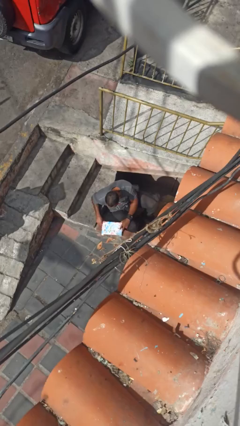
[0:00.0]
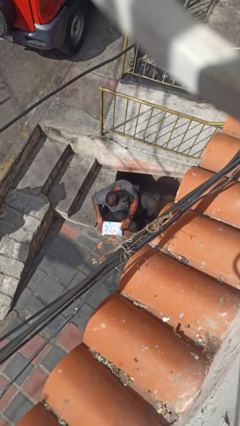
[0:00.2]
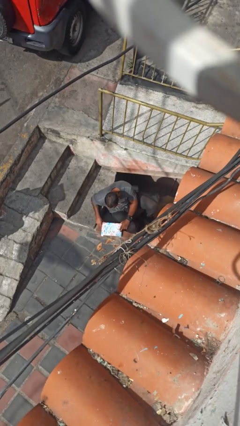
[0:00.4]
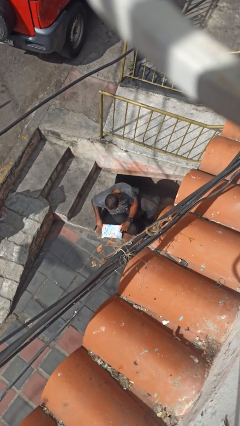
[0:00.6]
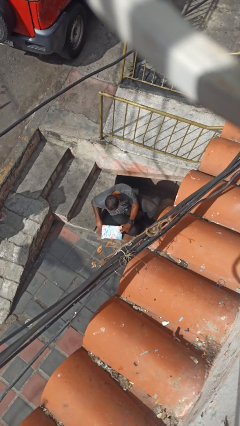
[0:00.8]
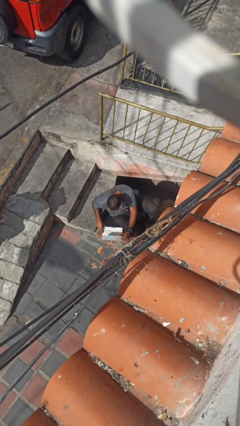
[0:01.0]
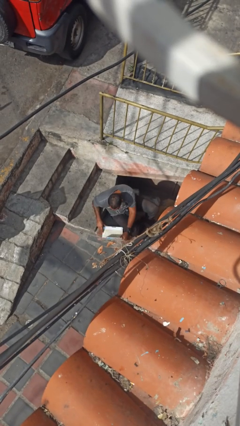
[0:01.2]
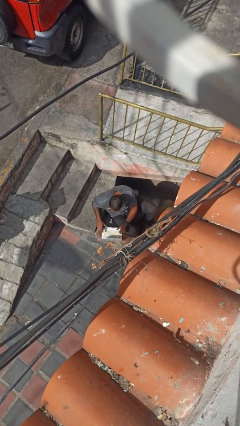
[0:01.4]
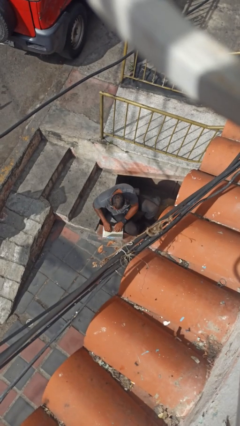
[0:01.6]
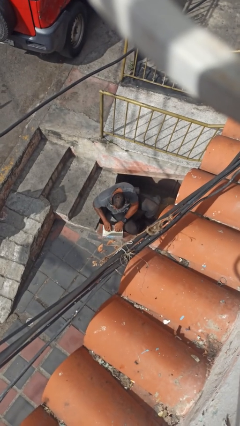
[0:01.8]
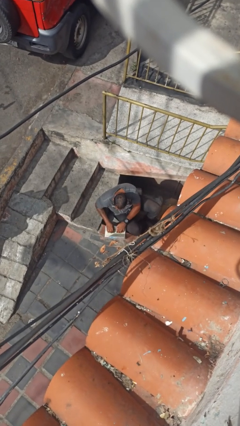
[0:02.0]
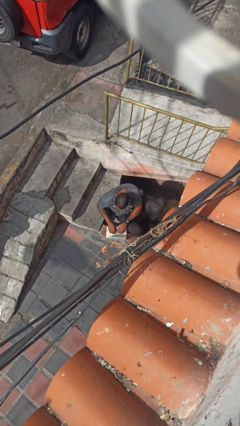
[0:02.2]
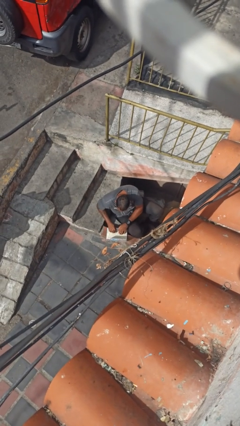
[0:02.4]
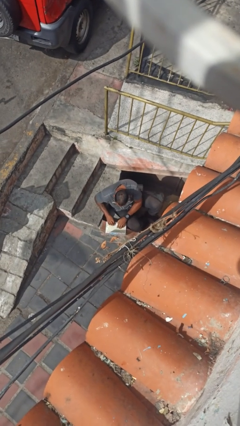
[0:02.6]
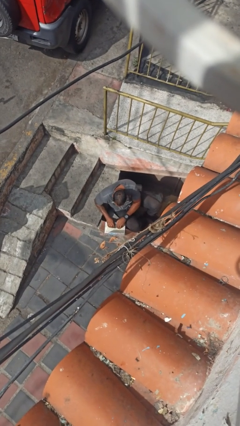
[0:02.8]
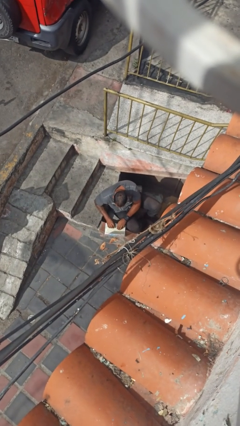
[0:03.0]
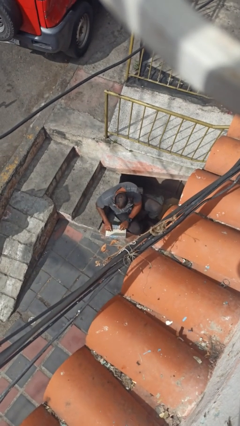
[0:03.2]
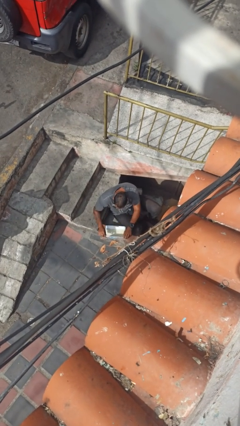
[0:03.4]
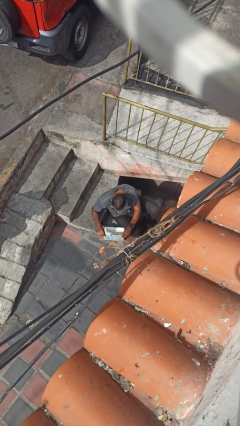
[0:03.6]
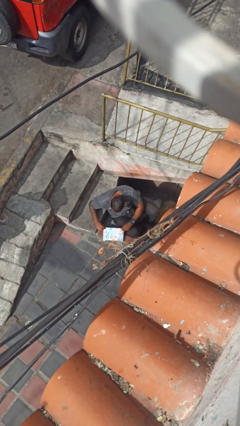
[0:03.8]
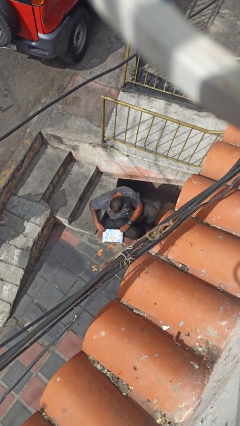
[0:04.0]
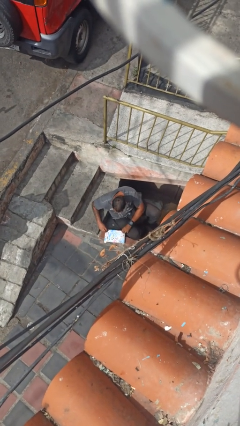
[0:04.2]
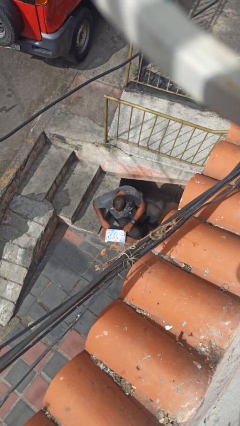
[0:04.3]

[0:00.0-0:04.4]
person interacts with laptop

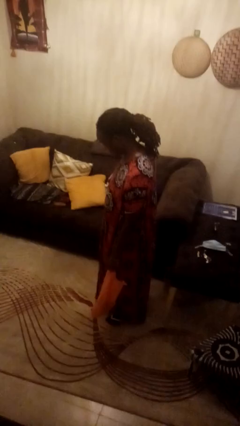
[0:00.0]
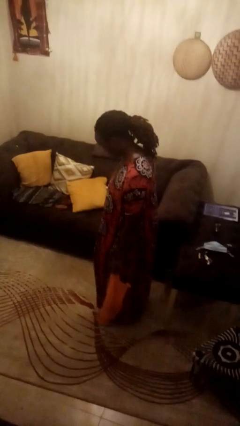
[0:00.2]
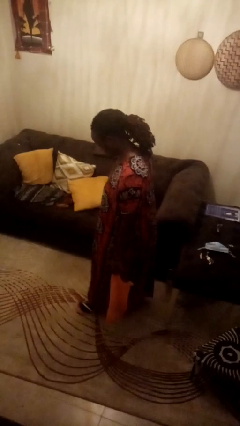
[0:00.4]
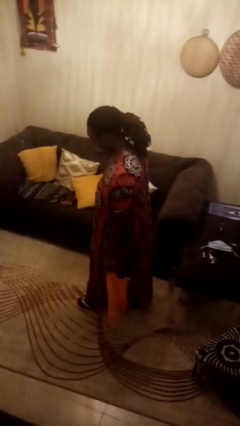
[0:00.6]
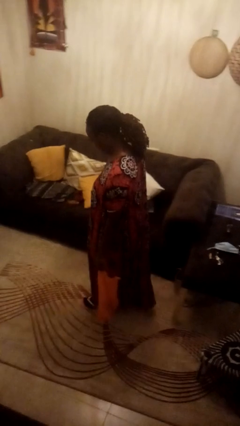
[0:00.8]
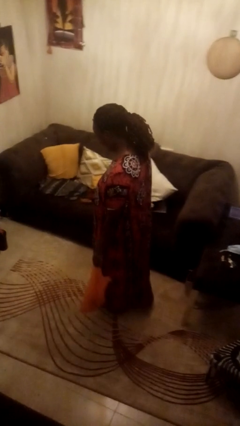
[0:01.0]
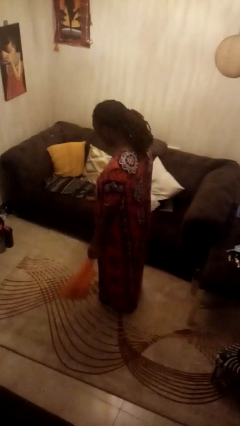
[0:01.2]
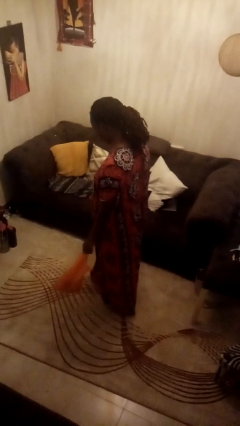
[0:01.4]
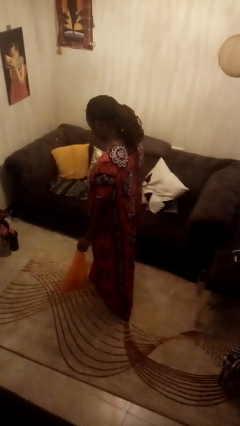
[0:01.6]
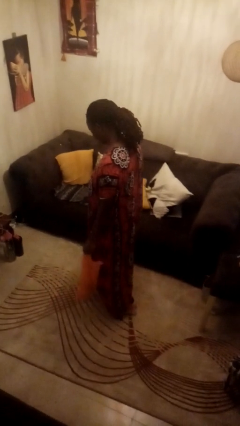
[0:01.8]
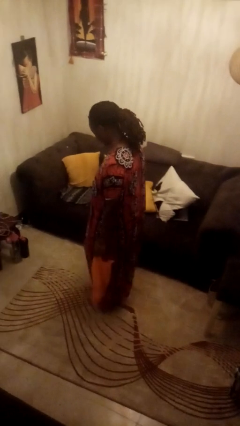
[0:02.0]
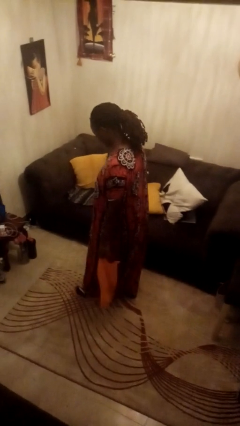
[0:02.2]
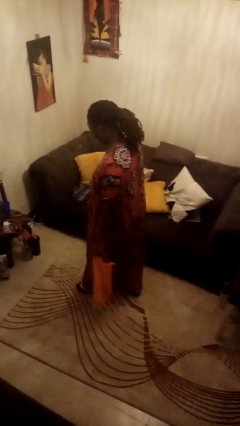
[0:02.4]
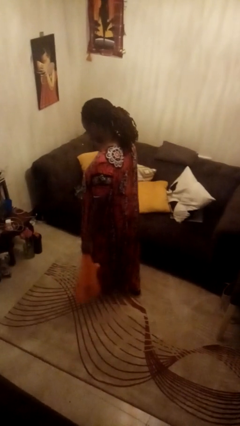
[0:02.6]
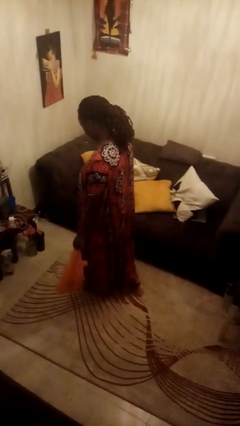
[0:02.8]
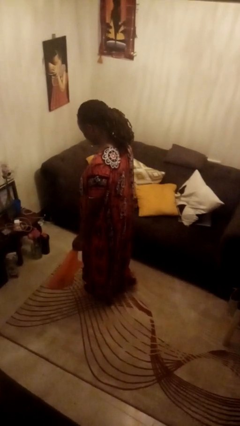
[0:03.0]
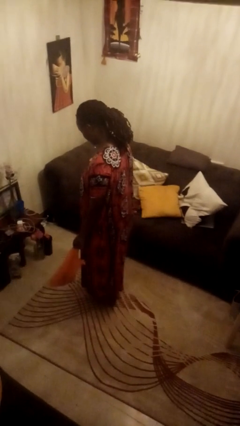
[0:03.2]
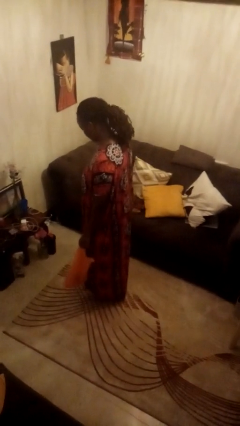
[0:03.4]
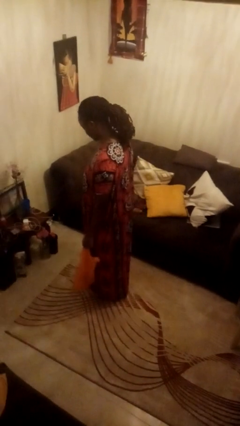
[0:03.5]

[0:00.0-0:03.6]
person carries groceries

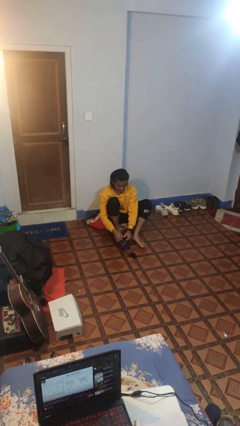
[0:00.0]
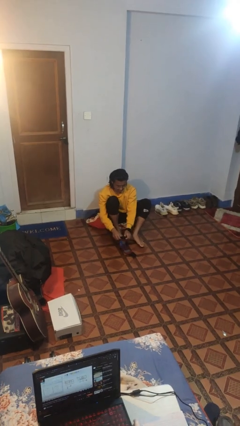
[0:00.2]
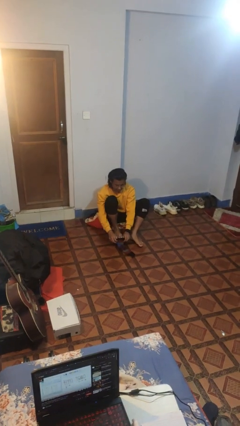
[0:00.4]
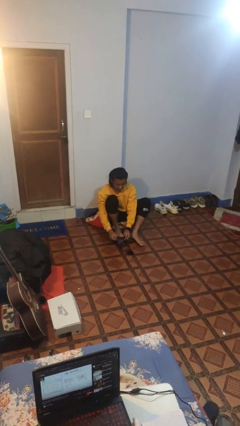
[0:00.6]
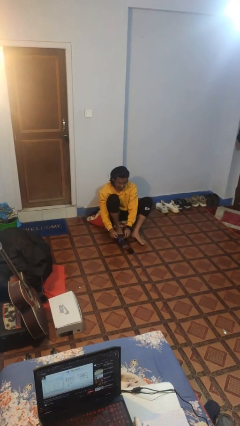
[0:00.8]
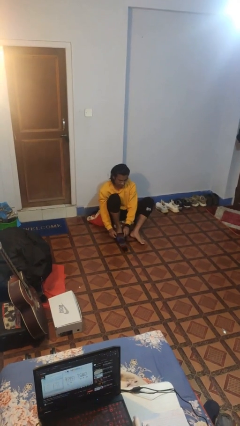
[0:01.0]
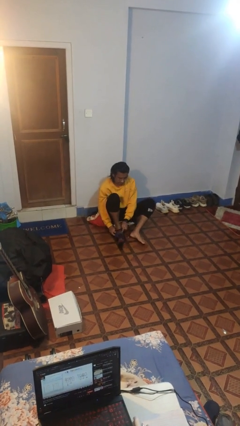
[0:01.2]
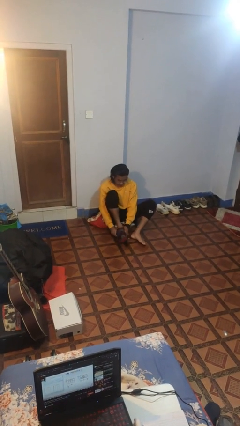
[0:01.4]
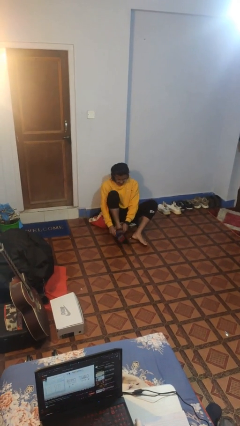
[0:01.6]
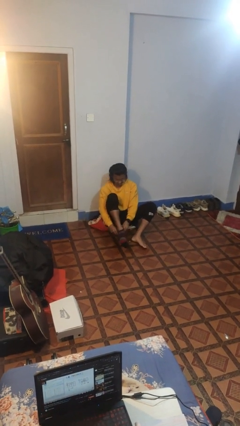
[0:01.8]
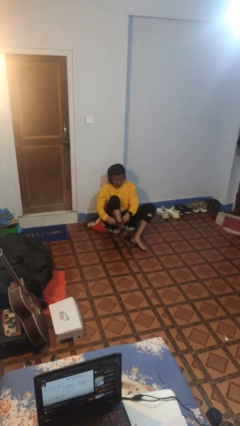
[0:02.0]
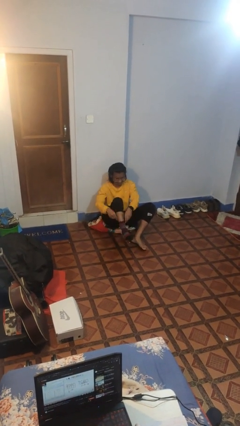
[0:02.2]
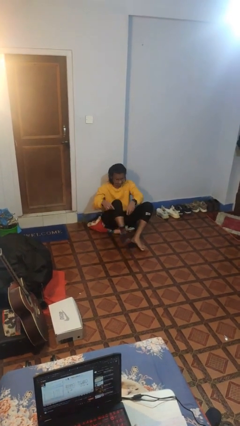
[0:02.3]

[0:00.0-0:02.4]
person puts on socks

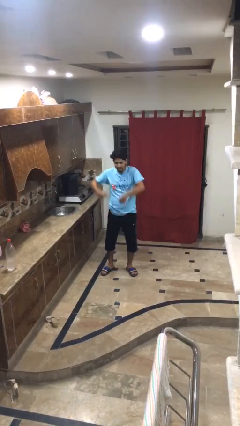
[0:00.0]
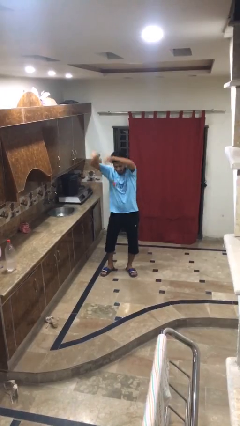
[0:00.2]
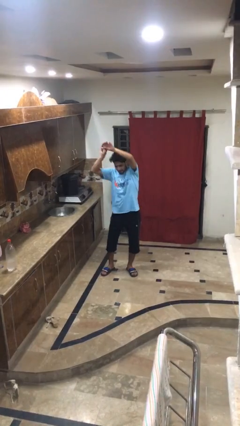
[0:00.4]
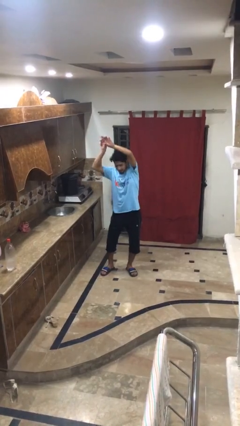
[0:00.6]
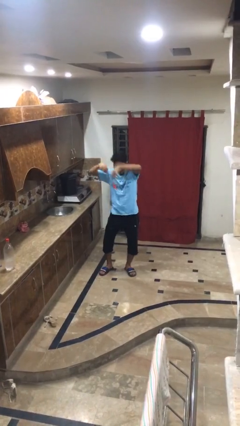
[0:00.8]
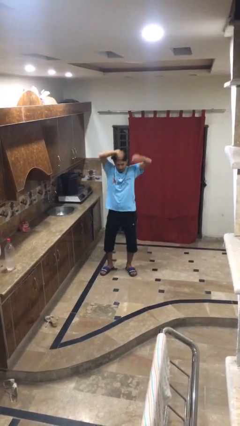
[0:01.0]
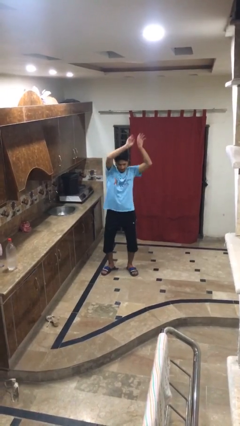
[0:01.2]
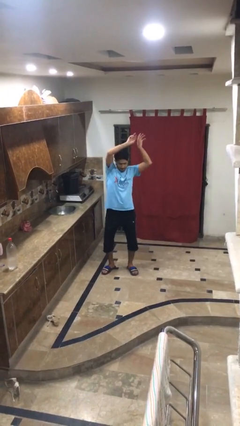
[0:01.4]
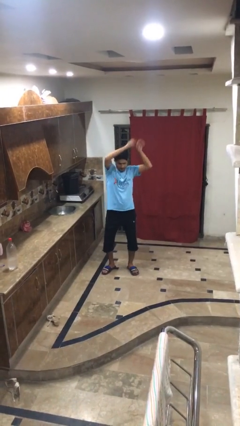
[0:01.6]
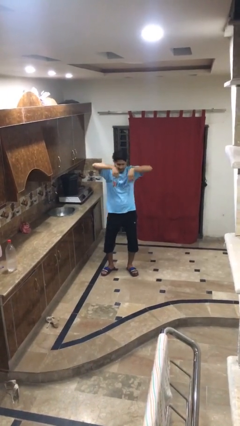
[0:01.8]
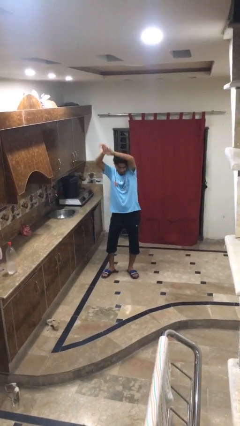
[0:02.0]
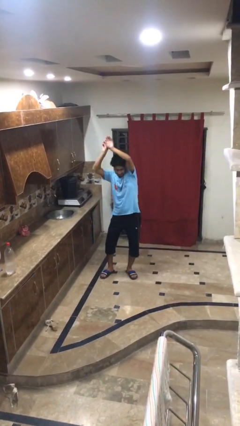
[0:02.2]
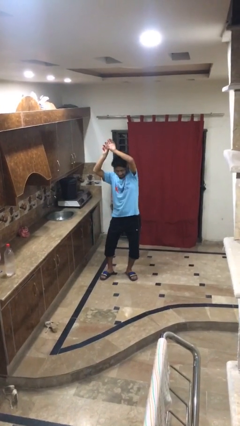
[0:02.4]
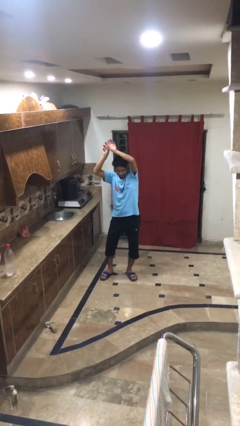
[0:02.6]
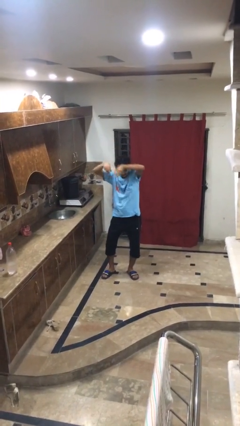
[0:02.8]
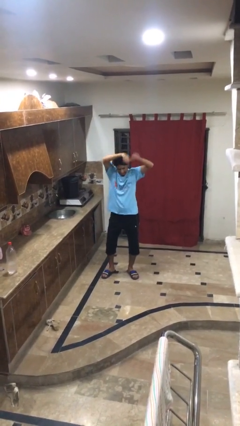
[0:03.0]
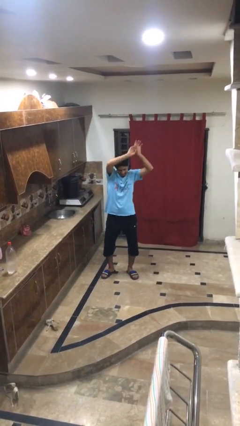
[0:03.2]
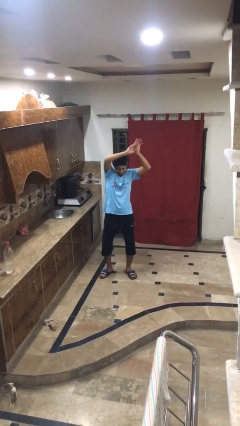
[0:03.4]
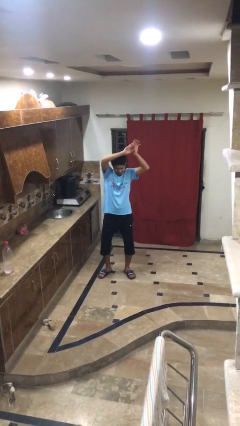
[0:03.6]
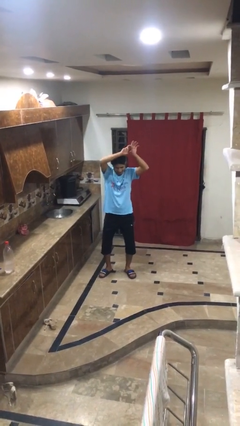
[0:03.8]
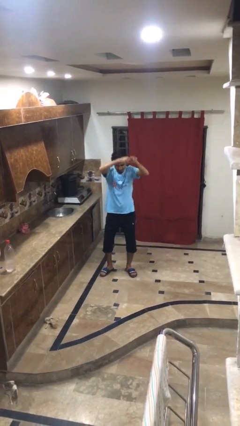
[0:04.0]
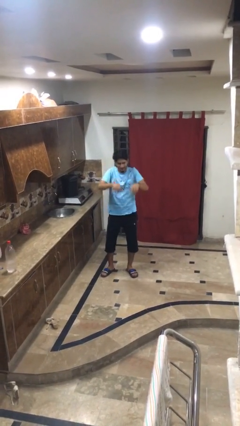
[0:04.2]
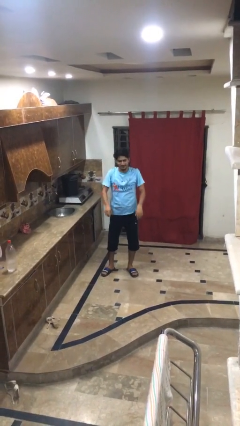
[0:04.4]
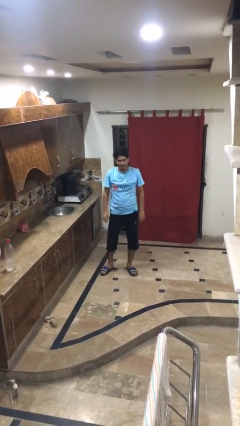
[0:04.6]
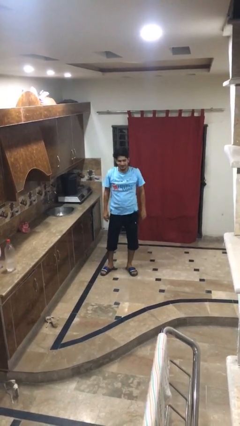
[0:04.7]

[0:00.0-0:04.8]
person dances in place

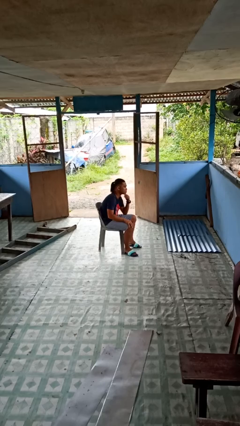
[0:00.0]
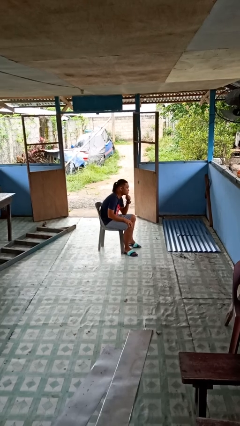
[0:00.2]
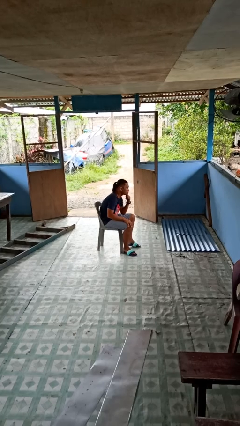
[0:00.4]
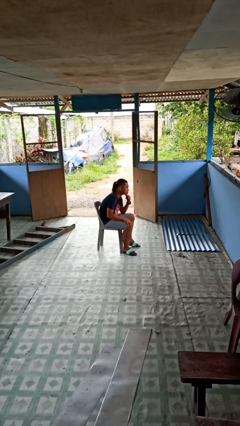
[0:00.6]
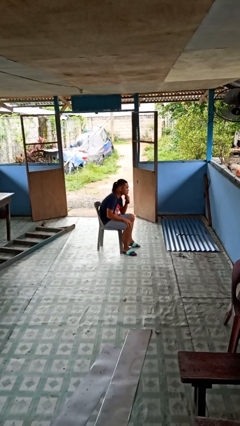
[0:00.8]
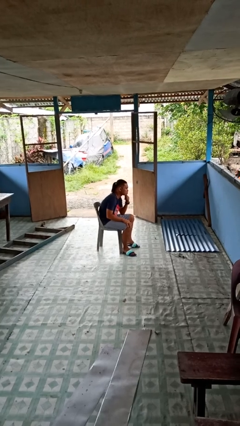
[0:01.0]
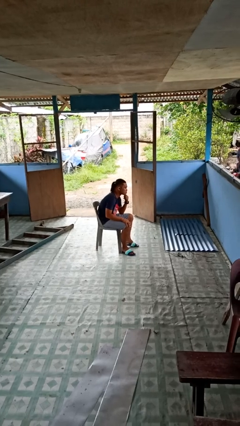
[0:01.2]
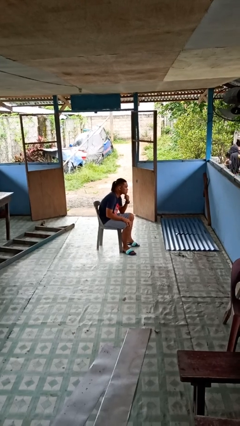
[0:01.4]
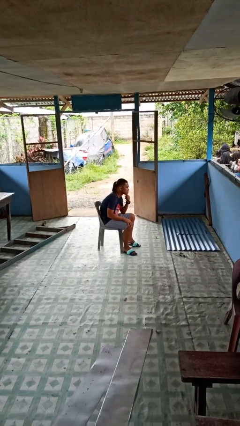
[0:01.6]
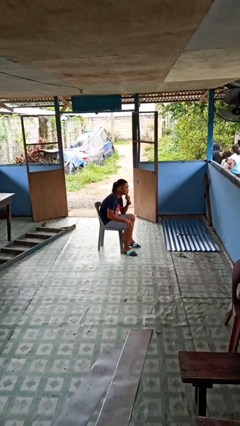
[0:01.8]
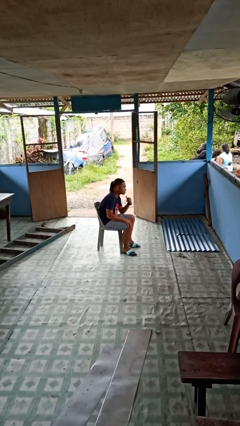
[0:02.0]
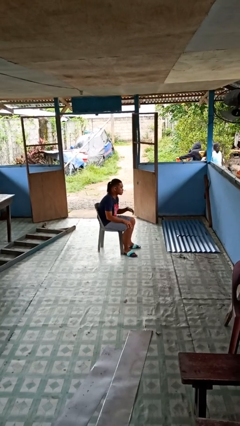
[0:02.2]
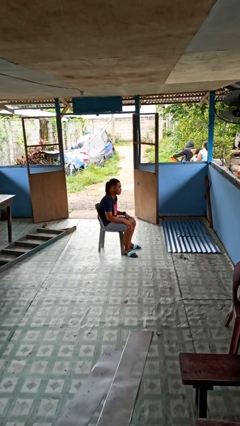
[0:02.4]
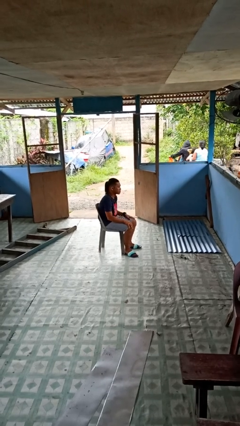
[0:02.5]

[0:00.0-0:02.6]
person strokes chin
